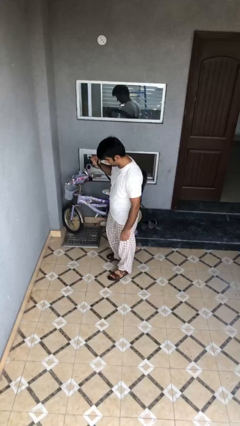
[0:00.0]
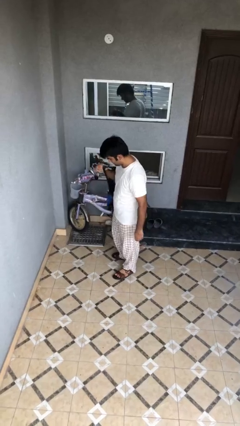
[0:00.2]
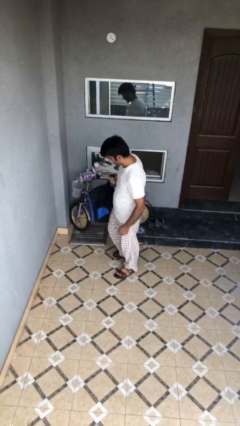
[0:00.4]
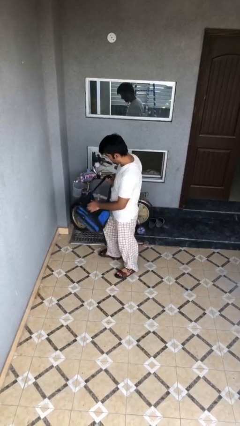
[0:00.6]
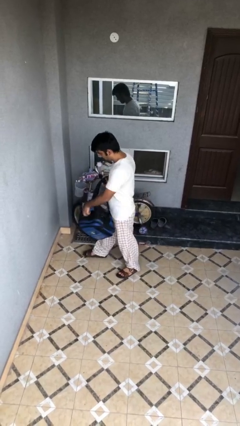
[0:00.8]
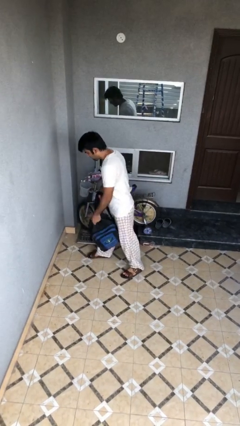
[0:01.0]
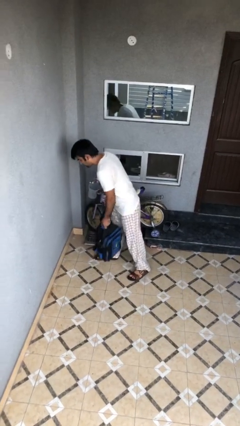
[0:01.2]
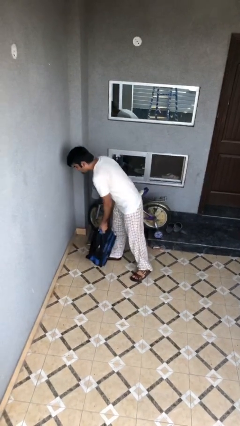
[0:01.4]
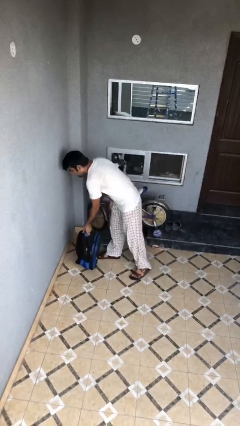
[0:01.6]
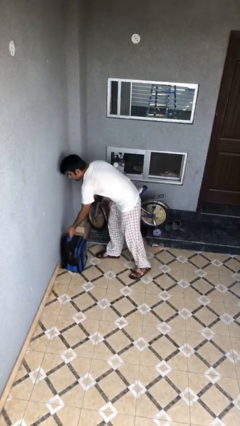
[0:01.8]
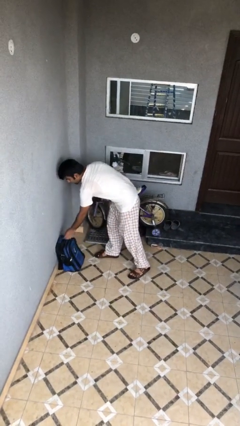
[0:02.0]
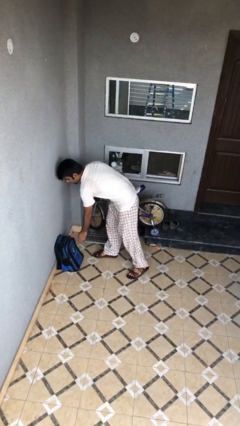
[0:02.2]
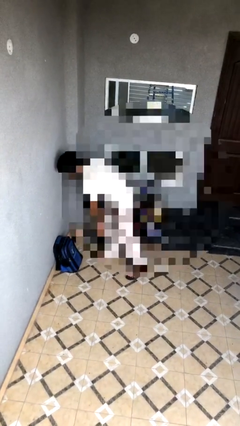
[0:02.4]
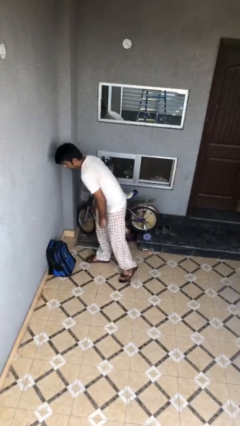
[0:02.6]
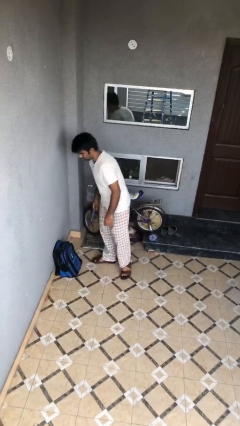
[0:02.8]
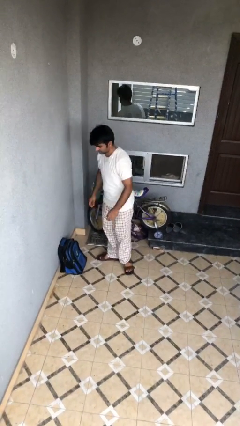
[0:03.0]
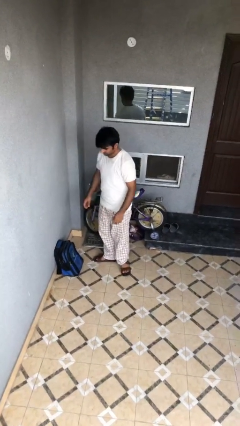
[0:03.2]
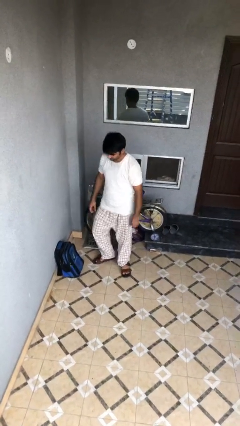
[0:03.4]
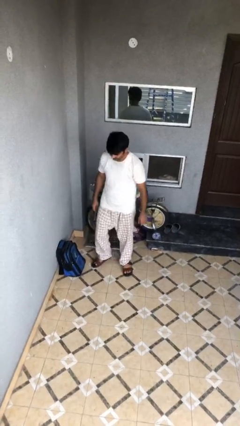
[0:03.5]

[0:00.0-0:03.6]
person puts down object on floor

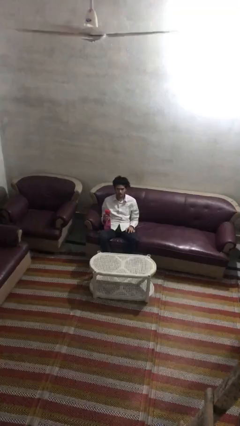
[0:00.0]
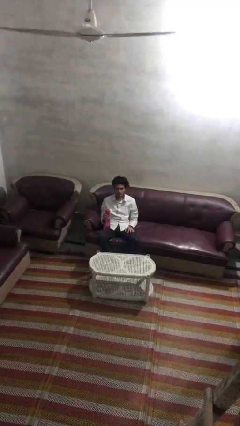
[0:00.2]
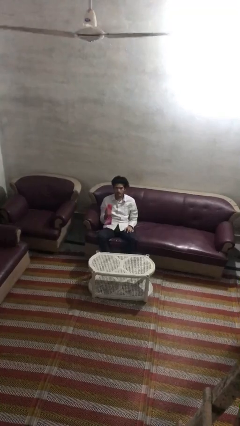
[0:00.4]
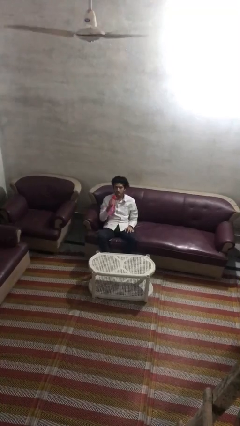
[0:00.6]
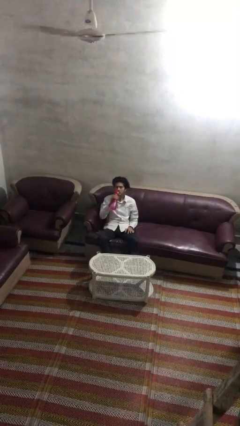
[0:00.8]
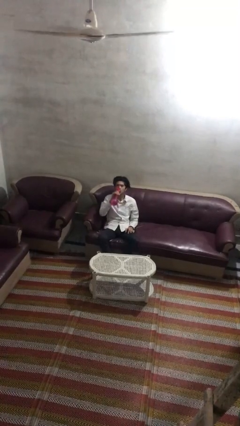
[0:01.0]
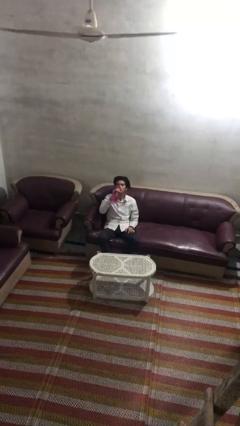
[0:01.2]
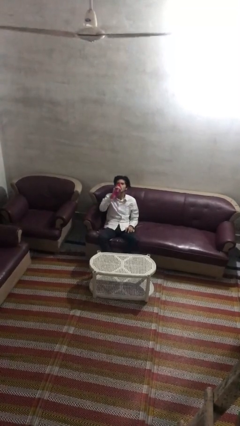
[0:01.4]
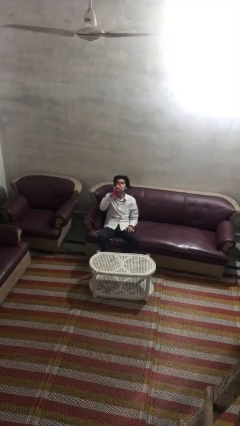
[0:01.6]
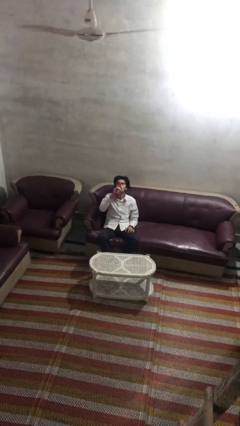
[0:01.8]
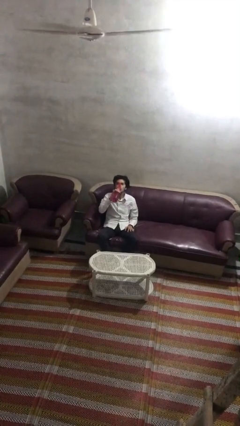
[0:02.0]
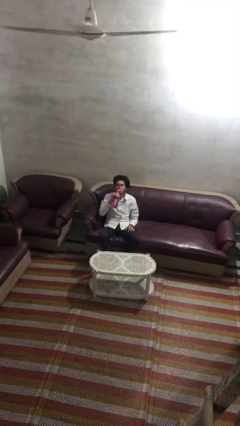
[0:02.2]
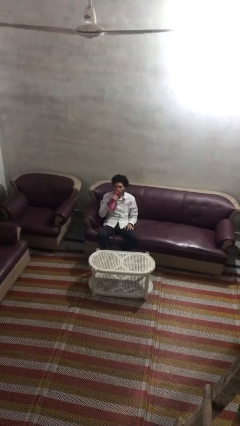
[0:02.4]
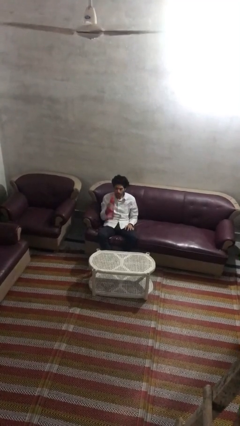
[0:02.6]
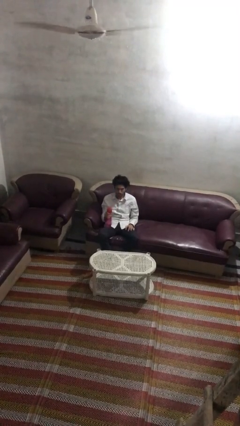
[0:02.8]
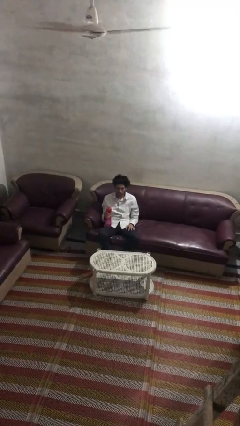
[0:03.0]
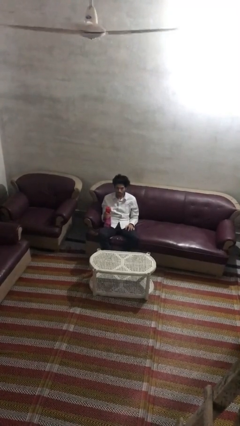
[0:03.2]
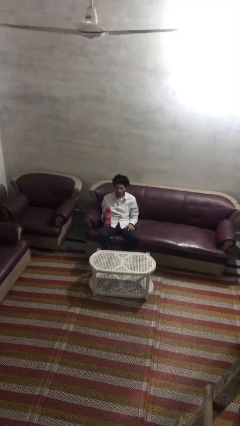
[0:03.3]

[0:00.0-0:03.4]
person drinks from bottle

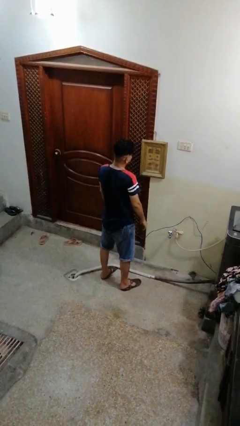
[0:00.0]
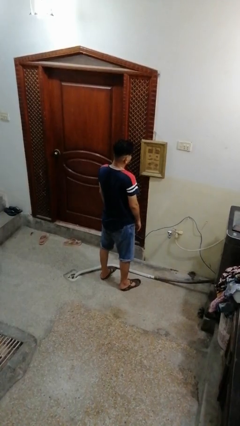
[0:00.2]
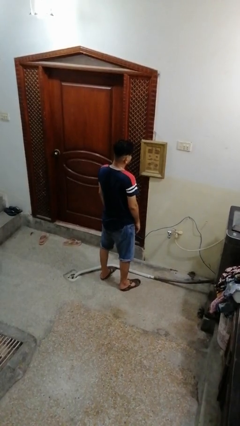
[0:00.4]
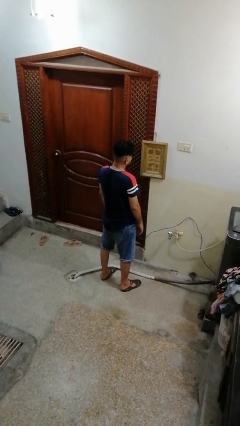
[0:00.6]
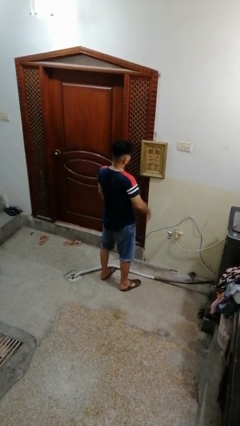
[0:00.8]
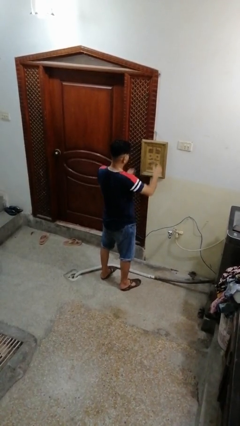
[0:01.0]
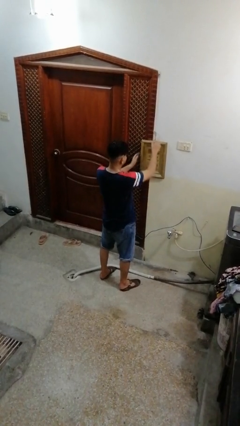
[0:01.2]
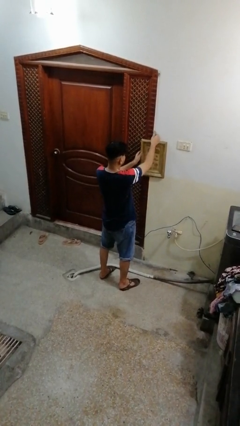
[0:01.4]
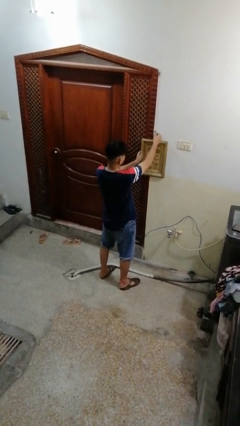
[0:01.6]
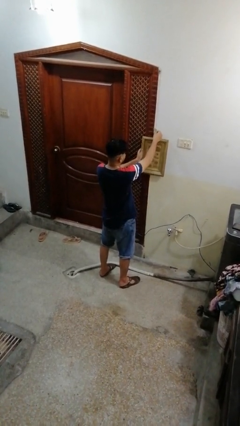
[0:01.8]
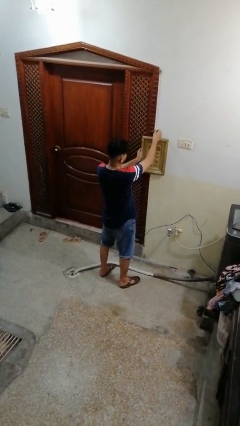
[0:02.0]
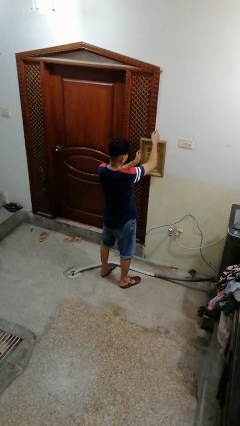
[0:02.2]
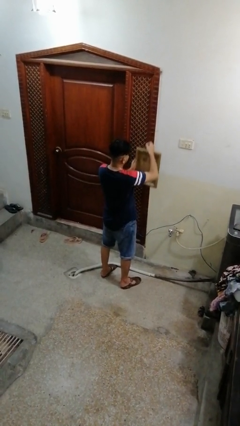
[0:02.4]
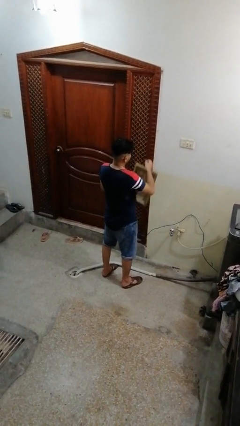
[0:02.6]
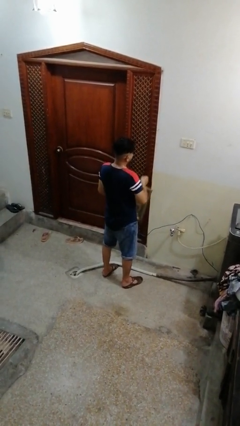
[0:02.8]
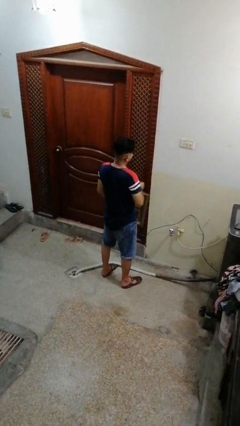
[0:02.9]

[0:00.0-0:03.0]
person takes down picture frame

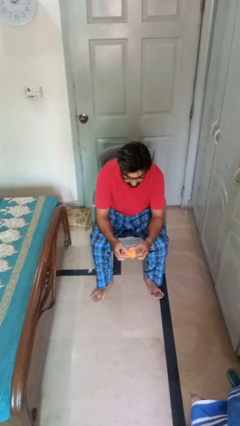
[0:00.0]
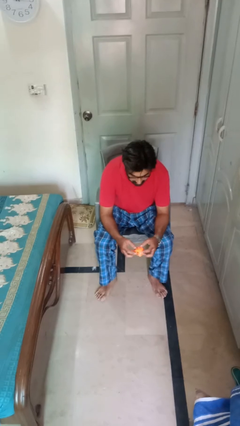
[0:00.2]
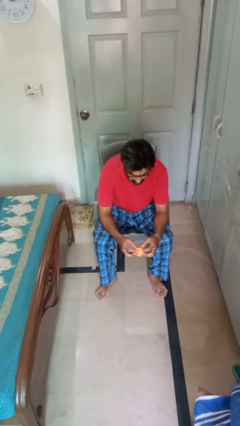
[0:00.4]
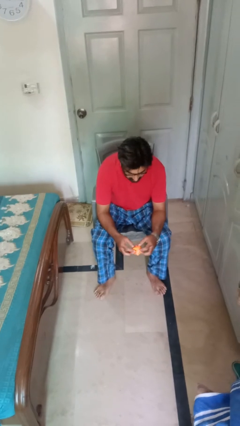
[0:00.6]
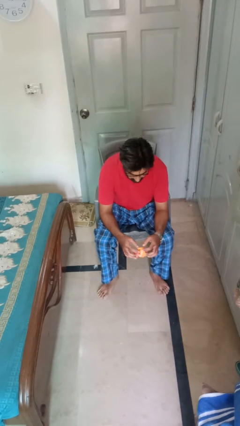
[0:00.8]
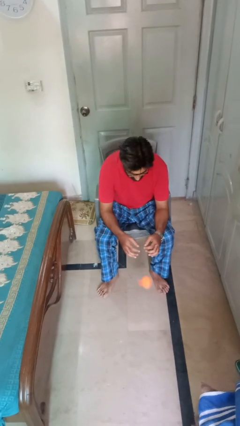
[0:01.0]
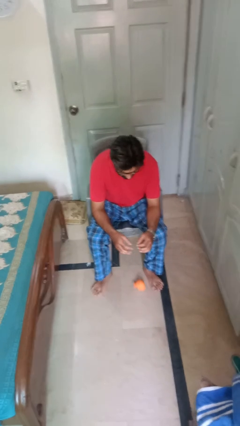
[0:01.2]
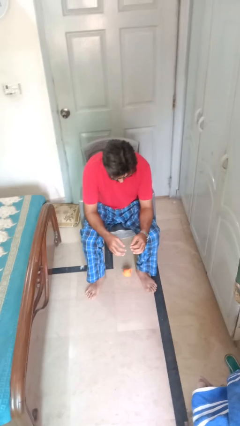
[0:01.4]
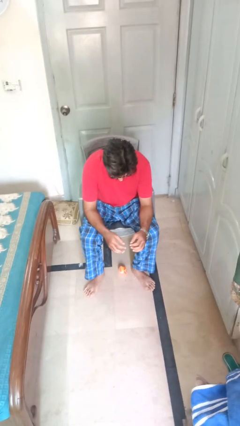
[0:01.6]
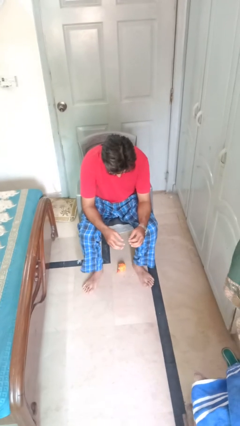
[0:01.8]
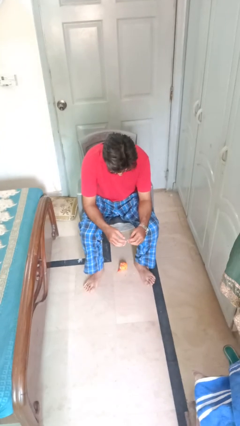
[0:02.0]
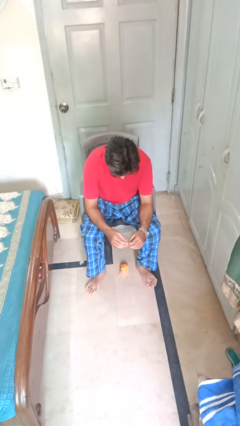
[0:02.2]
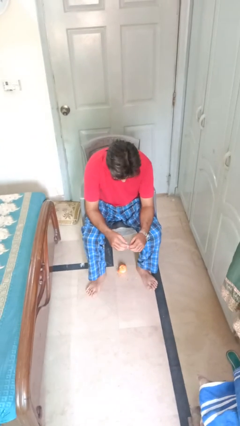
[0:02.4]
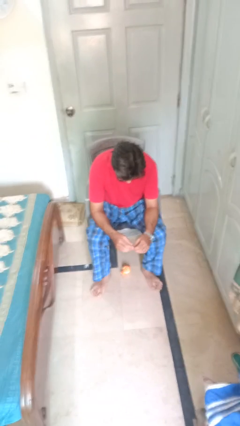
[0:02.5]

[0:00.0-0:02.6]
person drops object

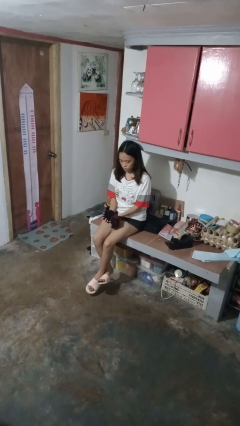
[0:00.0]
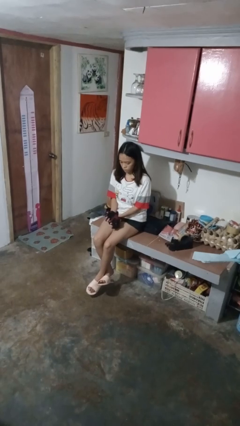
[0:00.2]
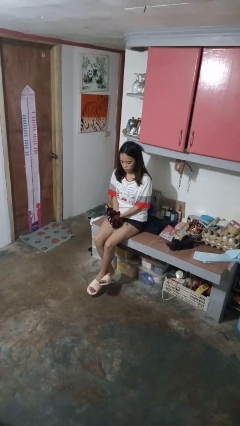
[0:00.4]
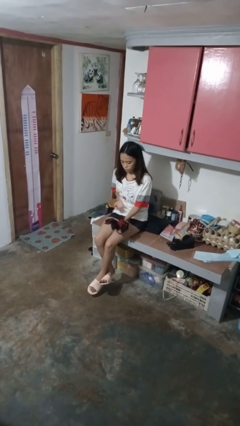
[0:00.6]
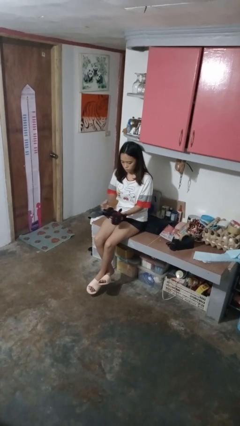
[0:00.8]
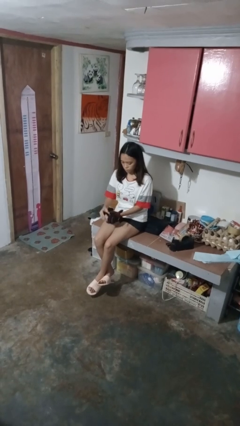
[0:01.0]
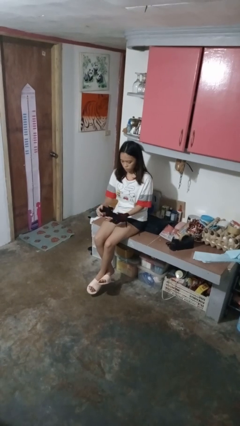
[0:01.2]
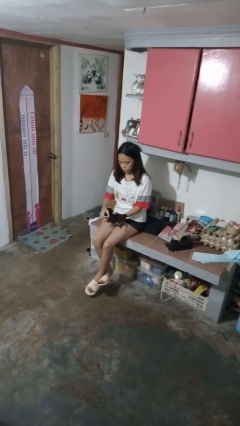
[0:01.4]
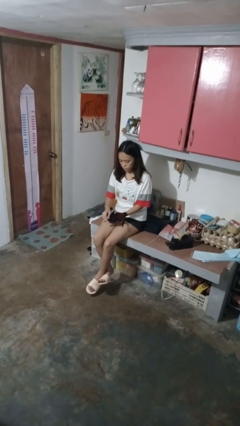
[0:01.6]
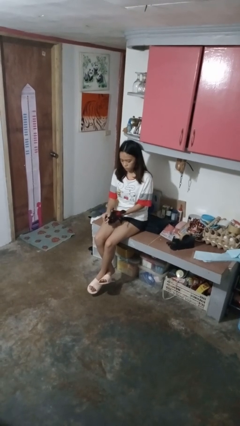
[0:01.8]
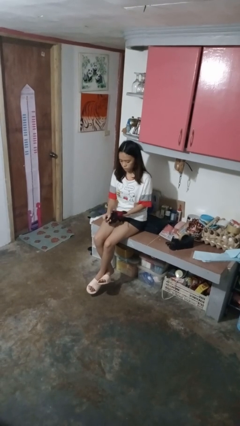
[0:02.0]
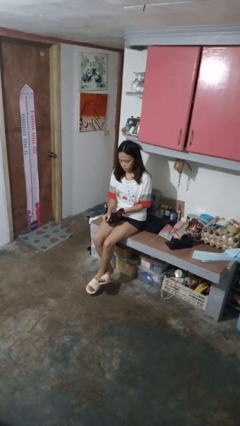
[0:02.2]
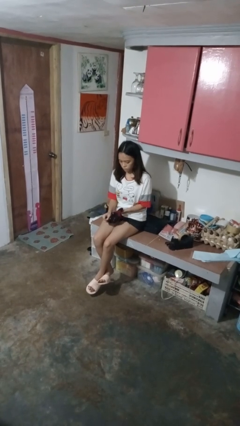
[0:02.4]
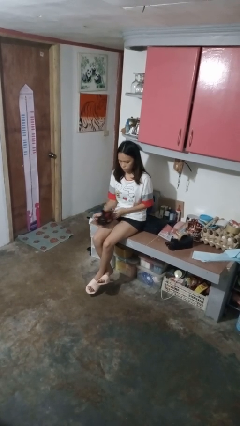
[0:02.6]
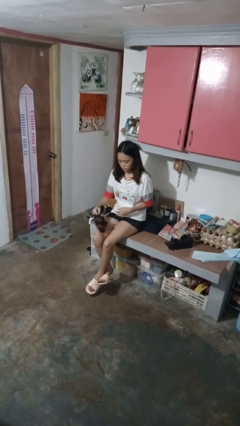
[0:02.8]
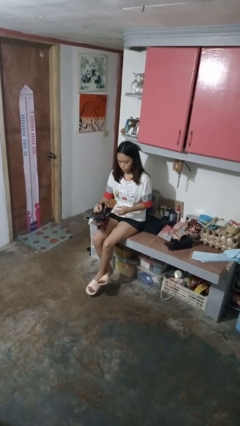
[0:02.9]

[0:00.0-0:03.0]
person takes off gloves

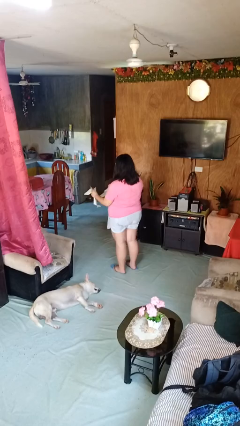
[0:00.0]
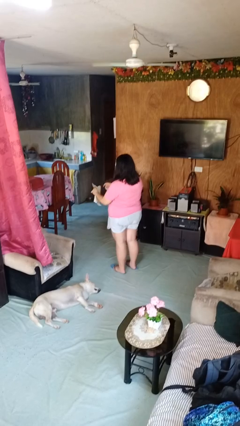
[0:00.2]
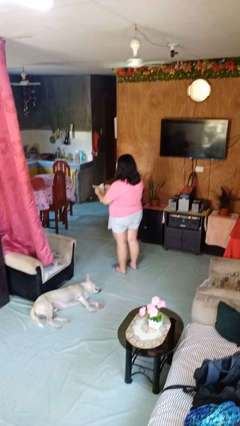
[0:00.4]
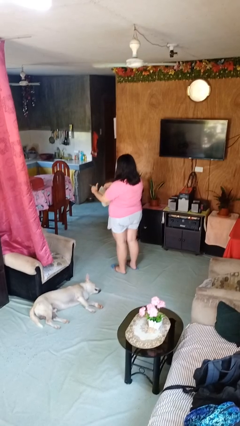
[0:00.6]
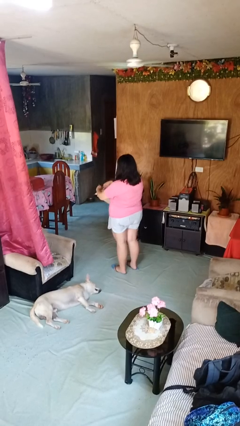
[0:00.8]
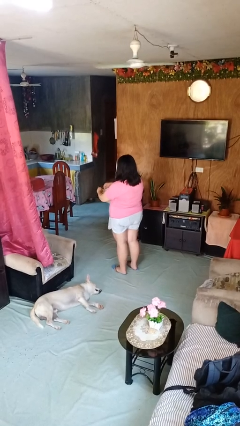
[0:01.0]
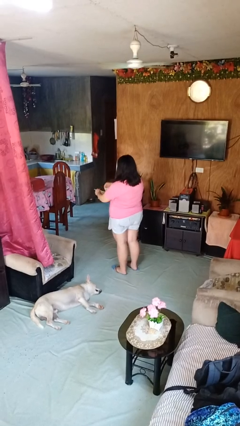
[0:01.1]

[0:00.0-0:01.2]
person tears paper

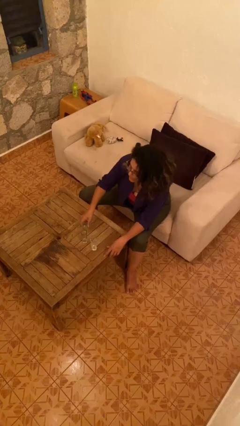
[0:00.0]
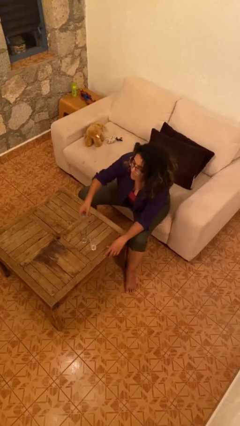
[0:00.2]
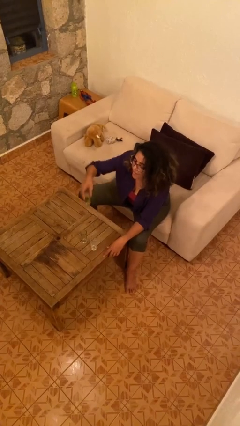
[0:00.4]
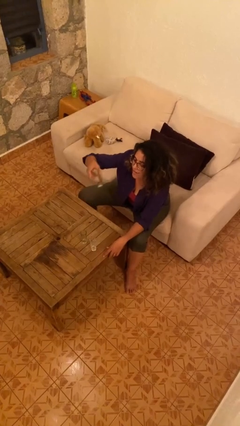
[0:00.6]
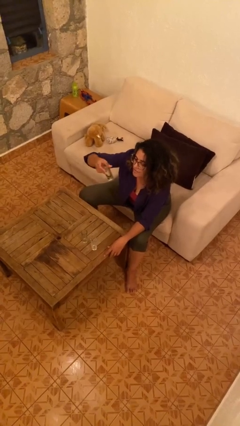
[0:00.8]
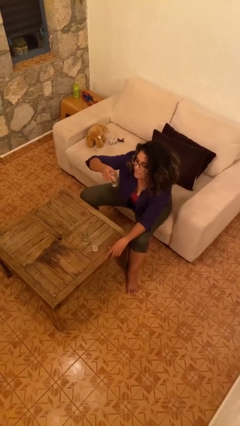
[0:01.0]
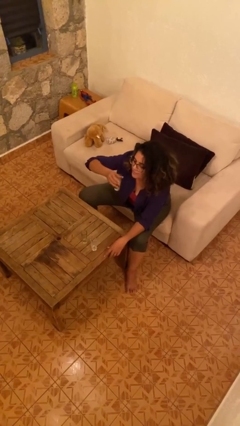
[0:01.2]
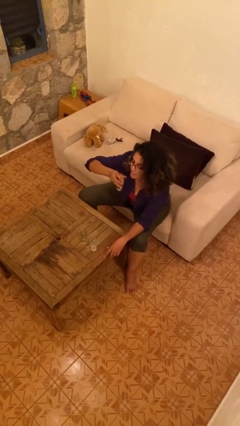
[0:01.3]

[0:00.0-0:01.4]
person picks up object from table
